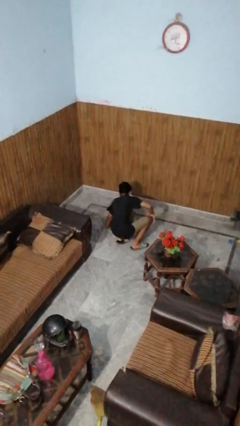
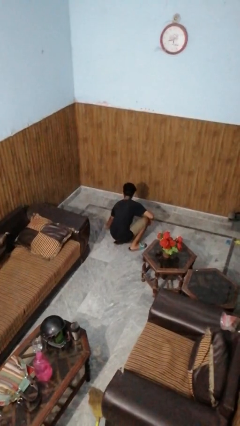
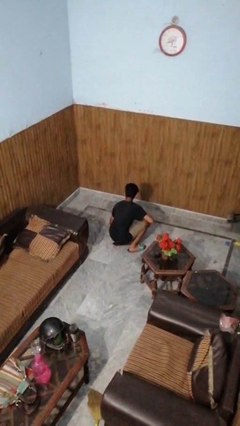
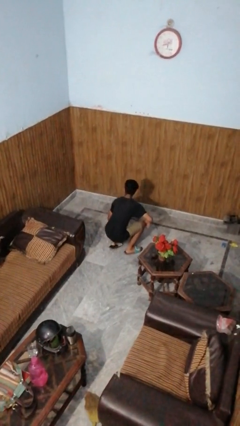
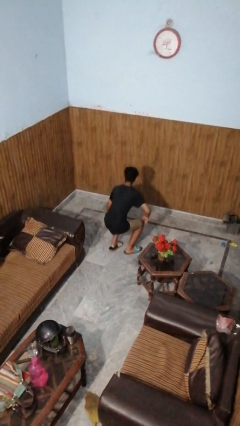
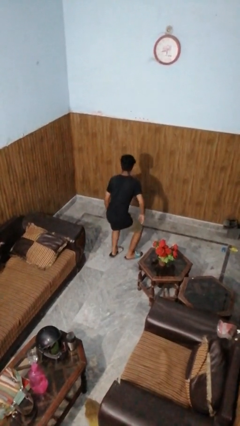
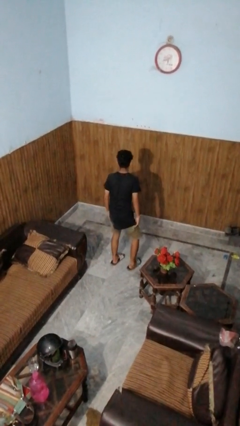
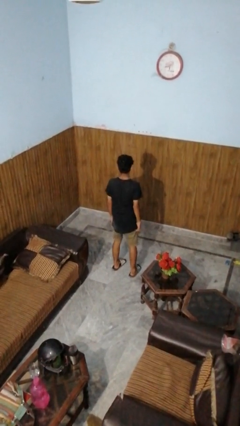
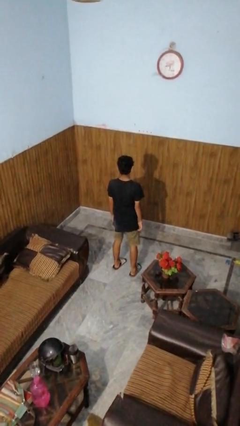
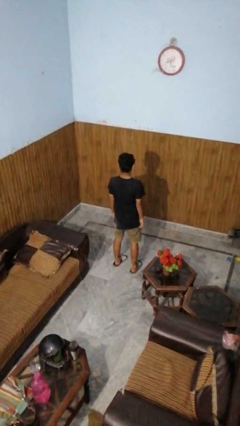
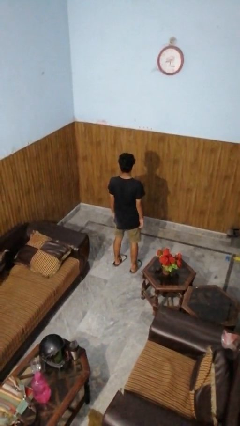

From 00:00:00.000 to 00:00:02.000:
person stands up from floor

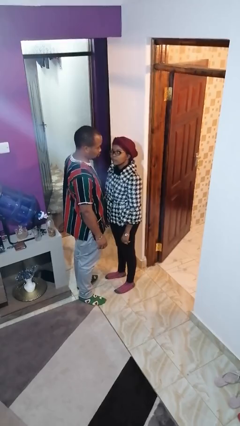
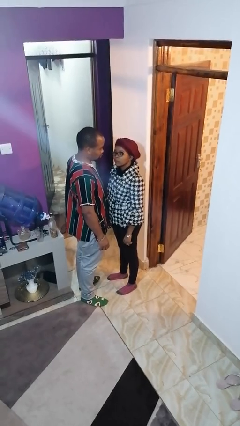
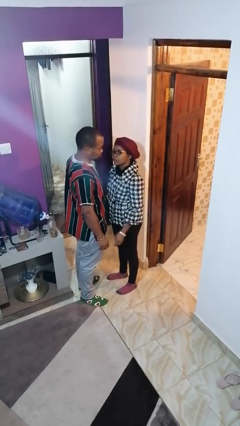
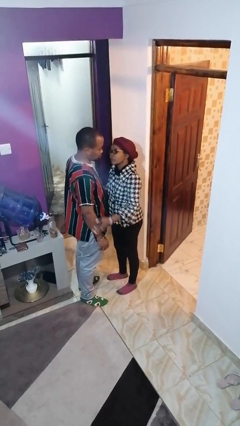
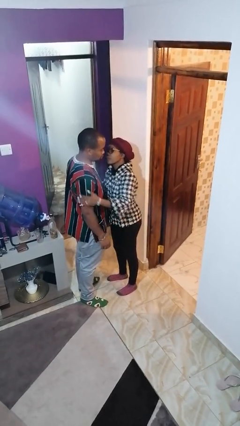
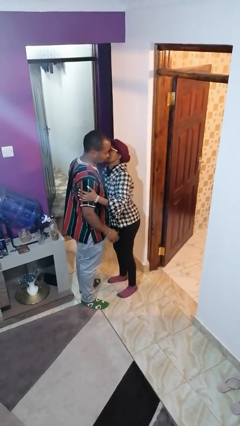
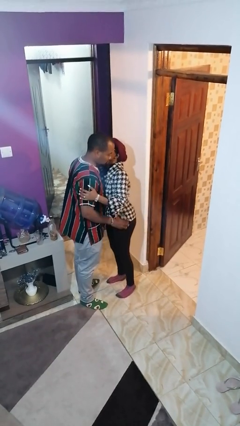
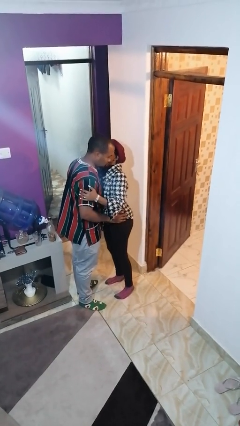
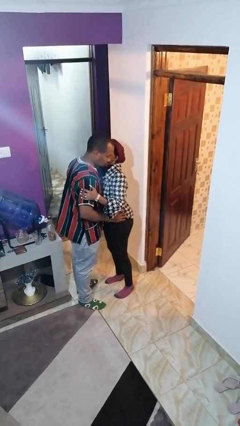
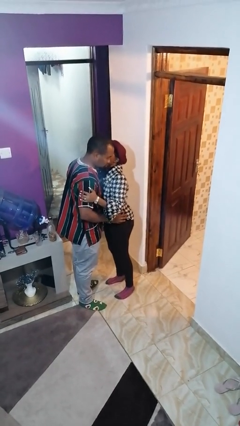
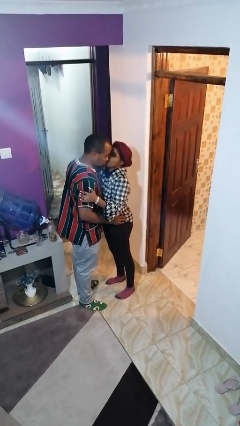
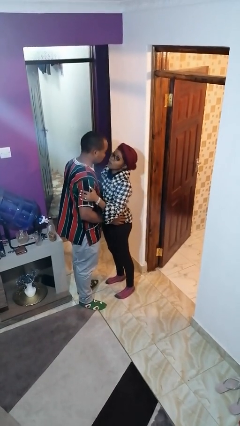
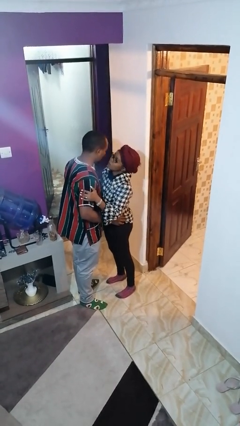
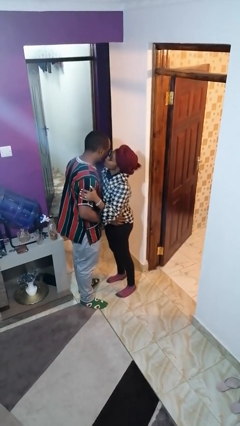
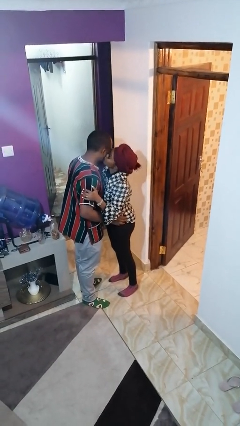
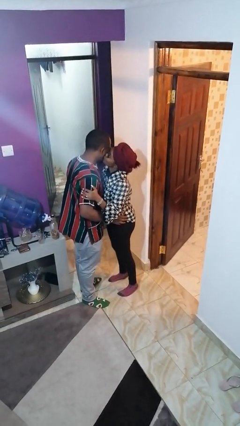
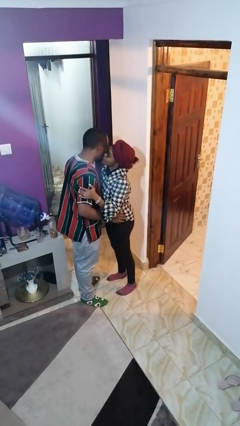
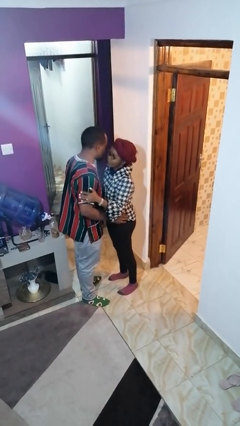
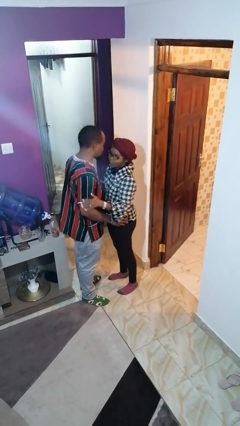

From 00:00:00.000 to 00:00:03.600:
person kisses cheek of person

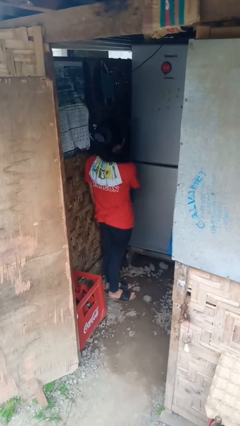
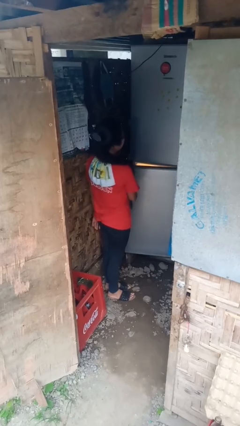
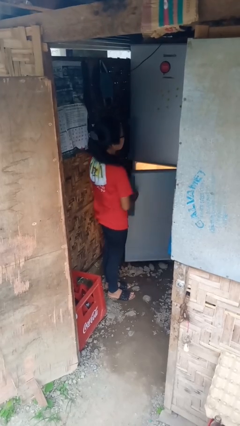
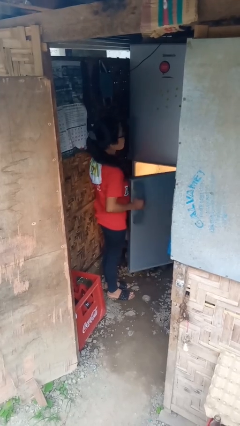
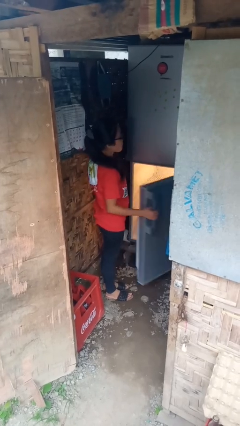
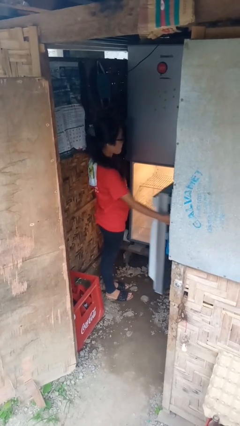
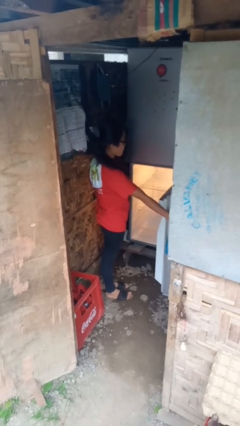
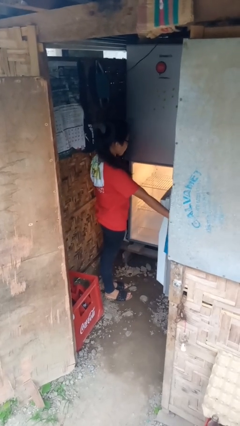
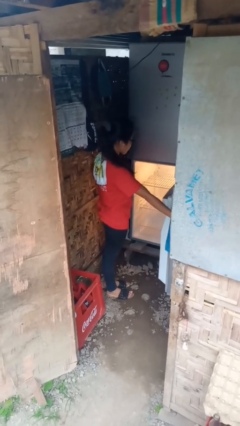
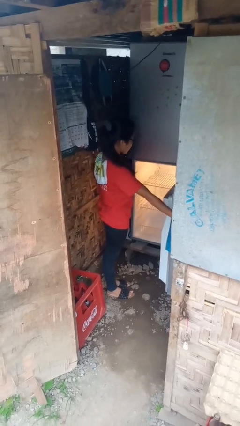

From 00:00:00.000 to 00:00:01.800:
person opens refrigerator

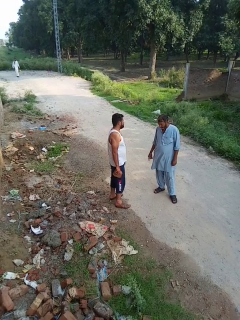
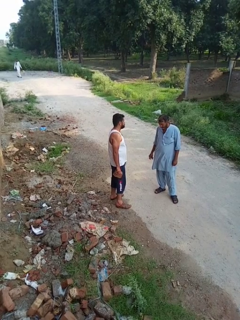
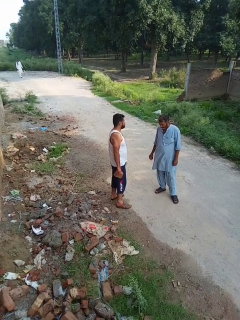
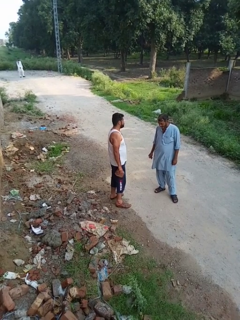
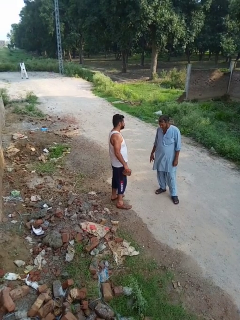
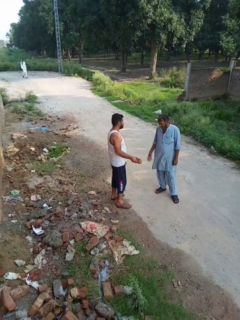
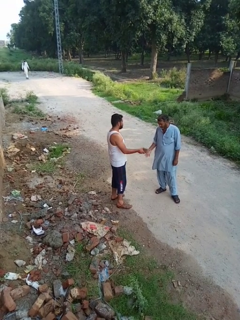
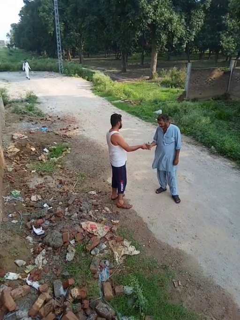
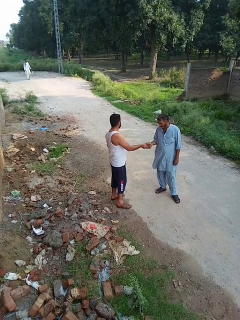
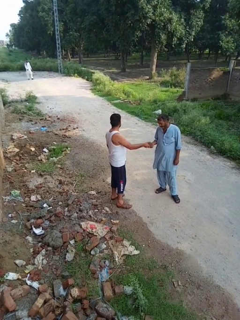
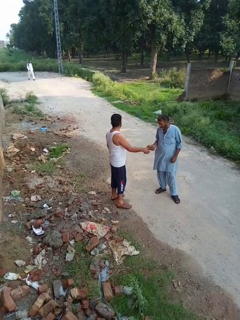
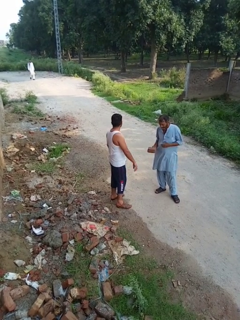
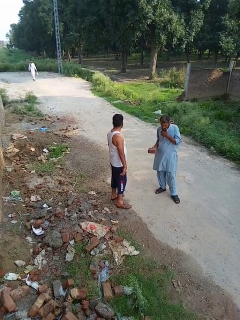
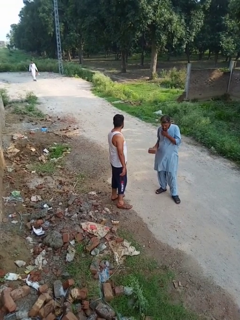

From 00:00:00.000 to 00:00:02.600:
person transfers object to person

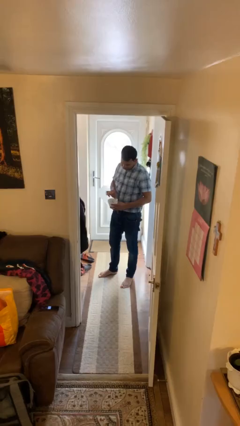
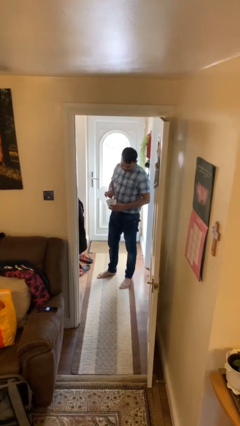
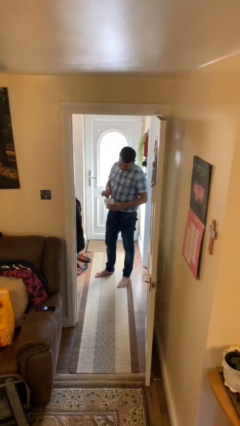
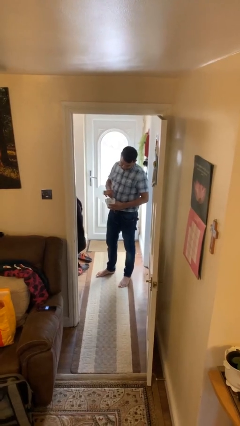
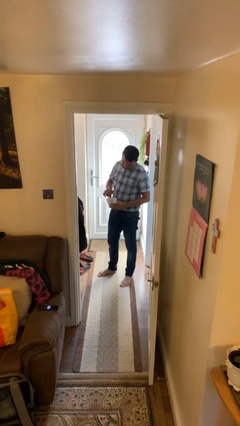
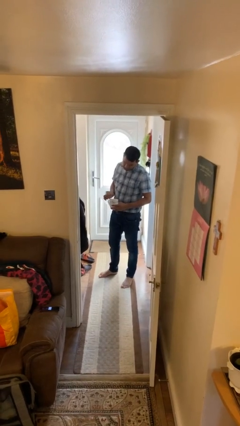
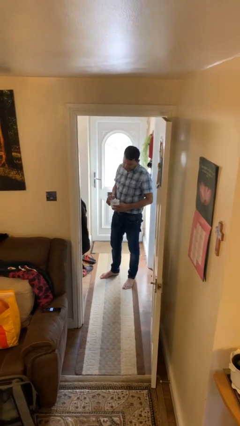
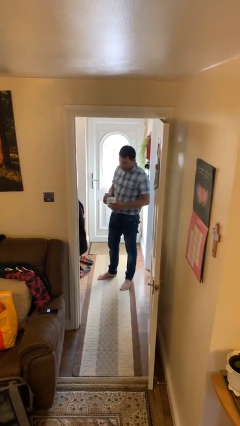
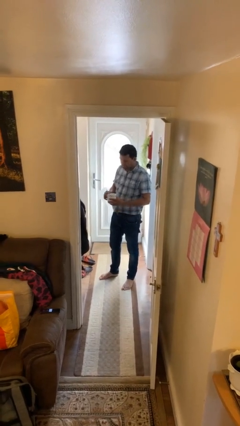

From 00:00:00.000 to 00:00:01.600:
person stirs mug

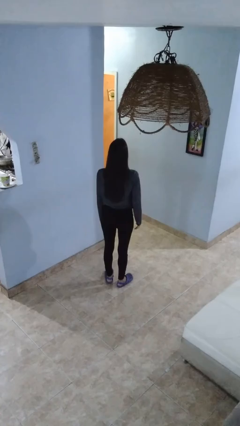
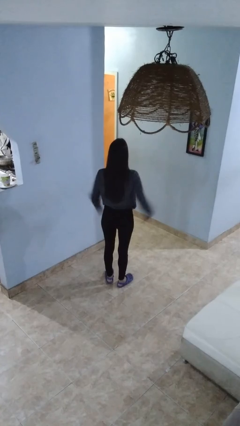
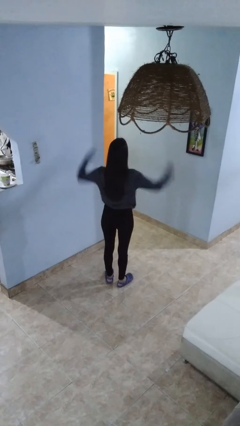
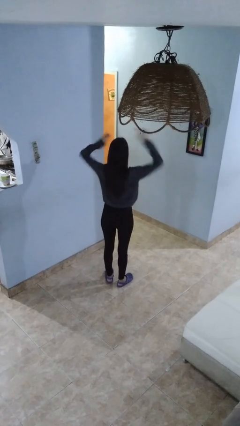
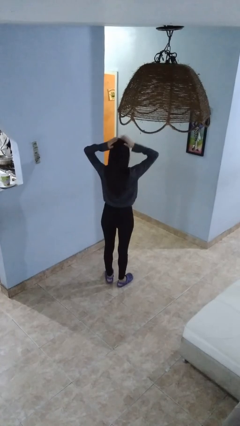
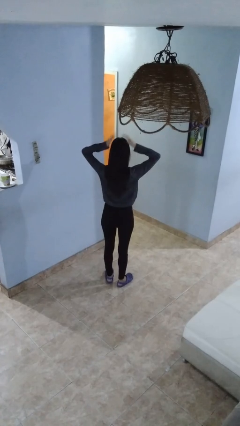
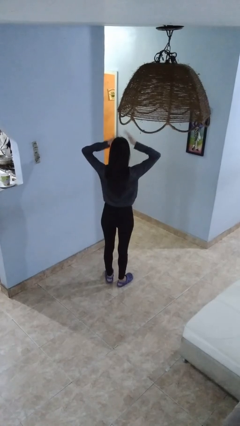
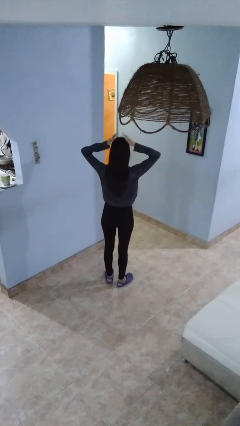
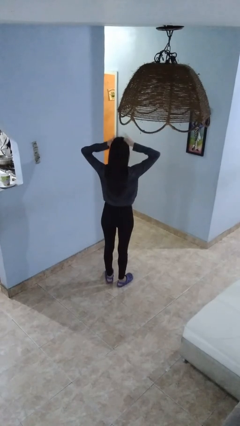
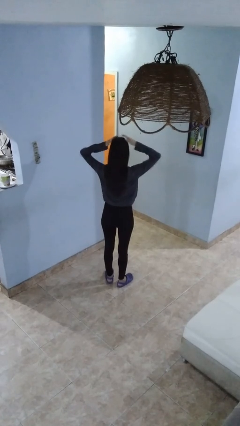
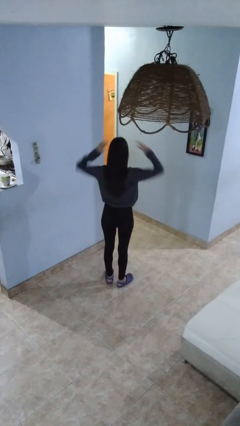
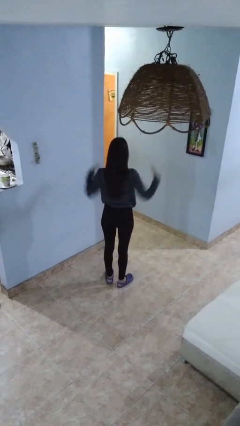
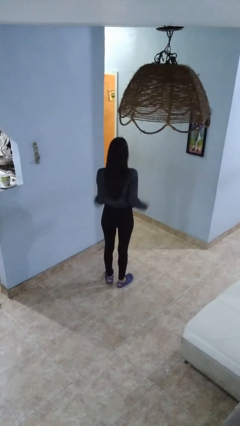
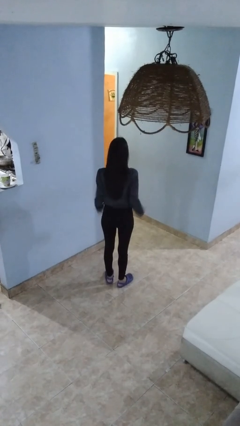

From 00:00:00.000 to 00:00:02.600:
person pats head

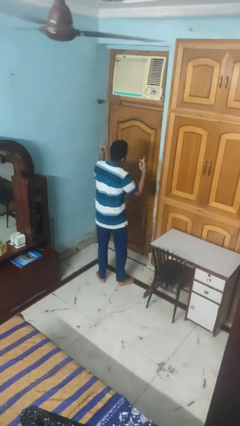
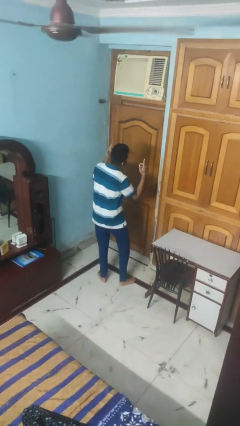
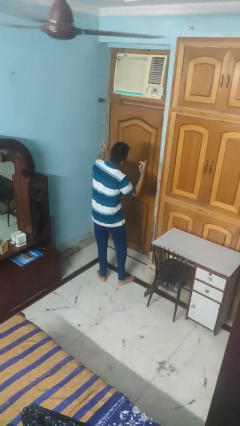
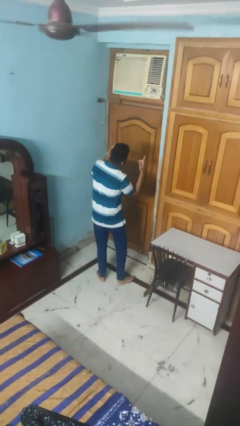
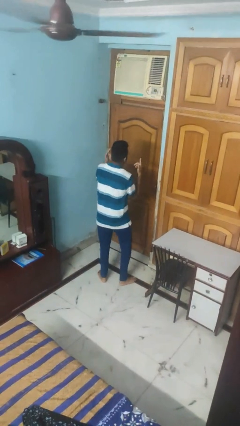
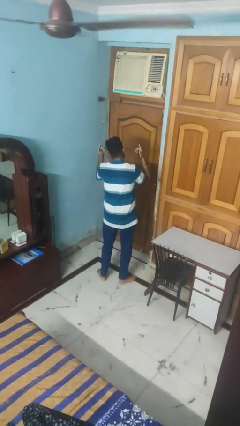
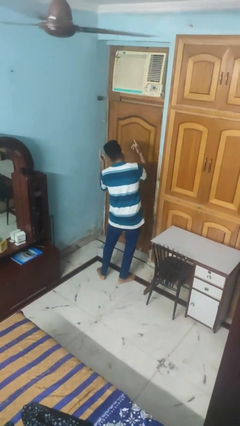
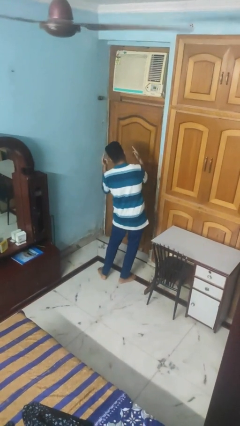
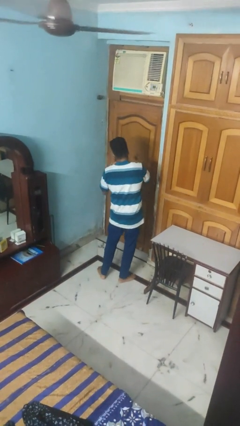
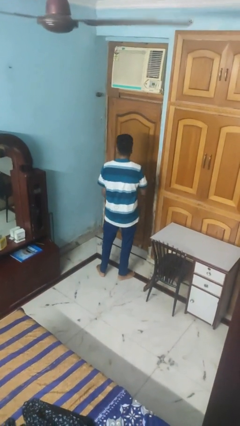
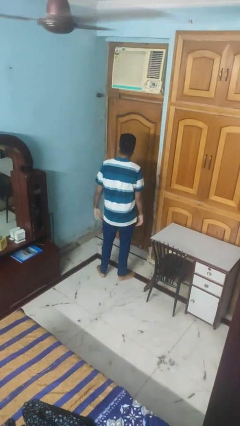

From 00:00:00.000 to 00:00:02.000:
person dances in place

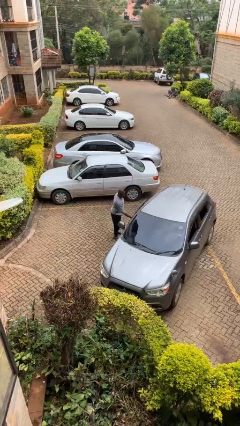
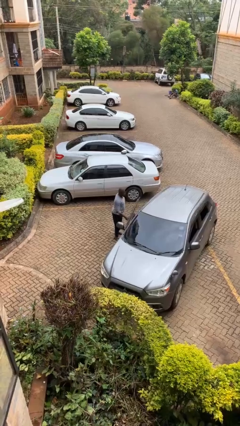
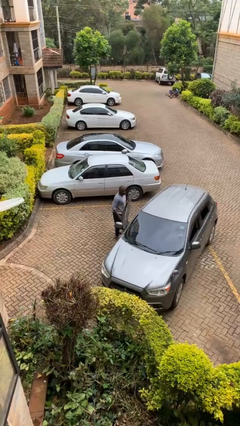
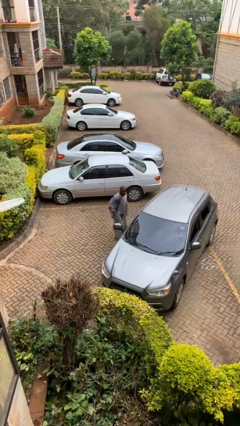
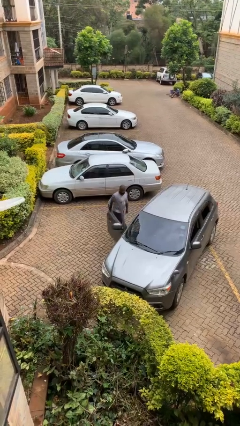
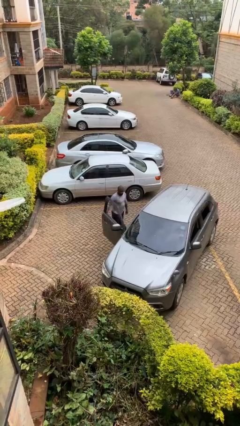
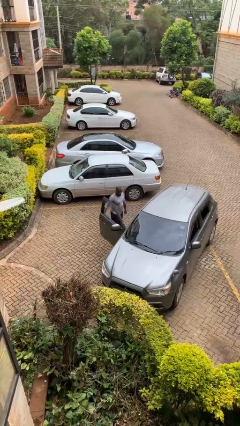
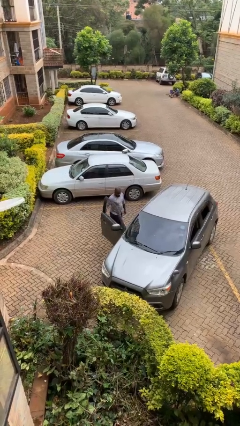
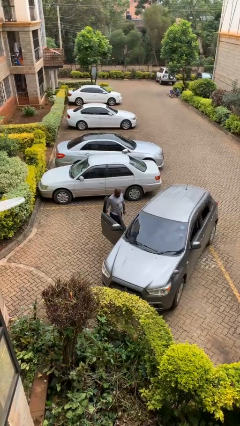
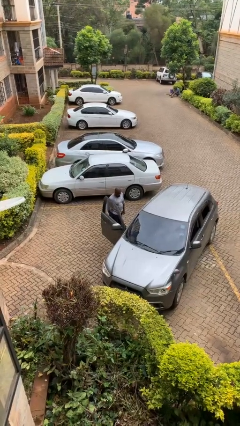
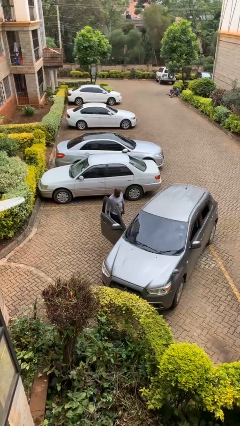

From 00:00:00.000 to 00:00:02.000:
person opens car door
